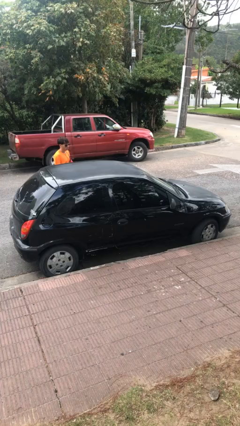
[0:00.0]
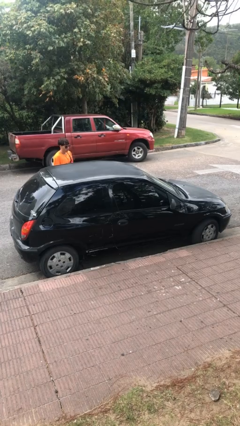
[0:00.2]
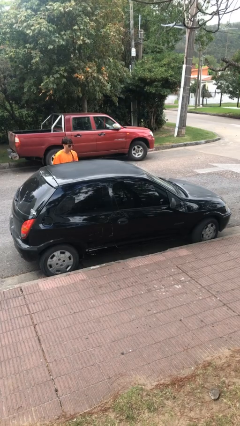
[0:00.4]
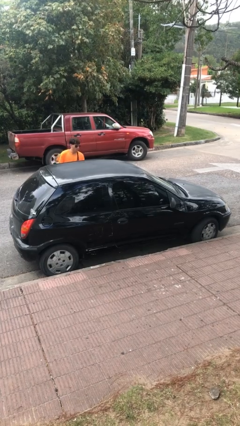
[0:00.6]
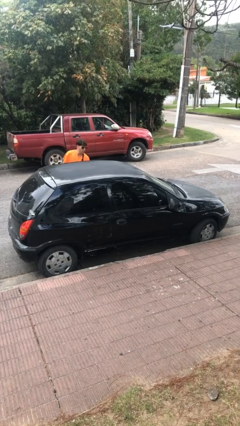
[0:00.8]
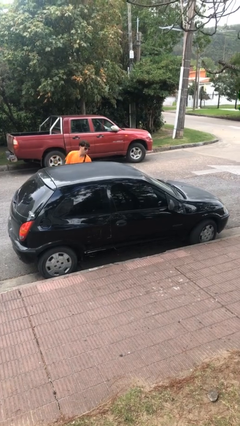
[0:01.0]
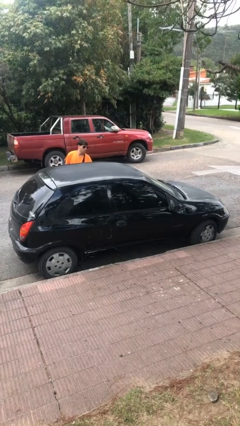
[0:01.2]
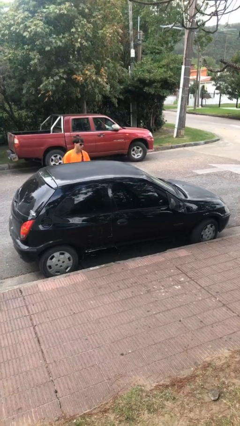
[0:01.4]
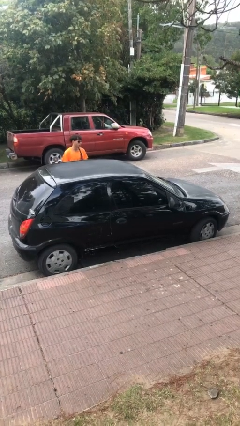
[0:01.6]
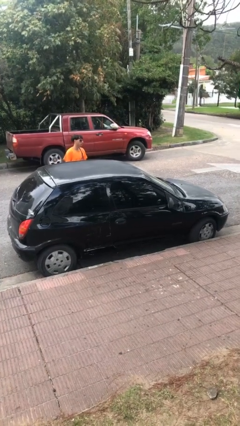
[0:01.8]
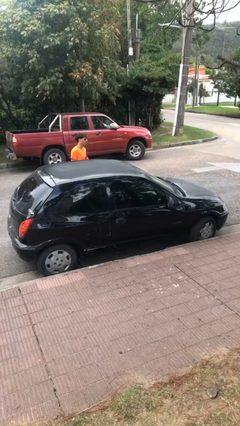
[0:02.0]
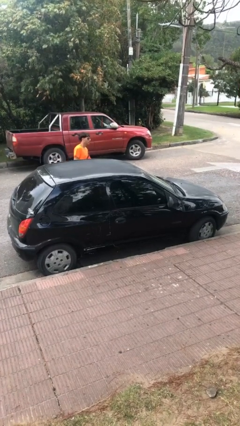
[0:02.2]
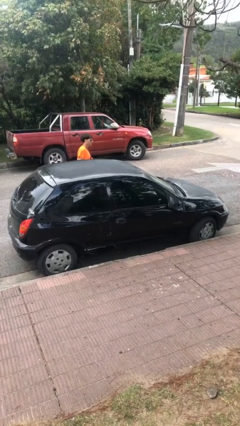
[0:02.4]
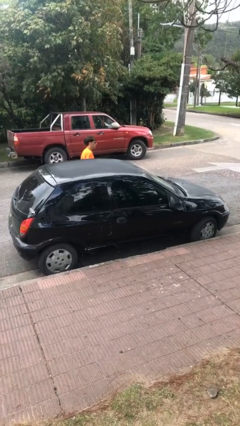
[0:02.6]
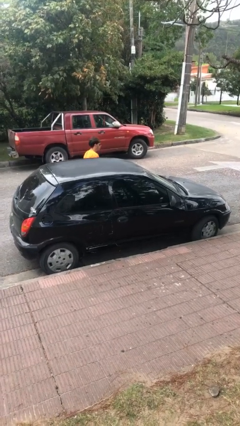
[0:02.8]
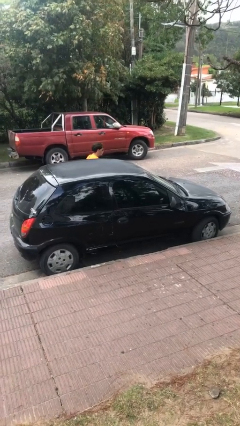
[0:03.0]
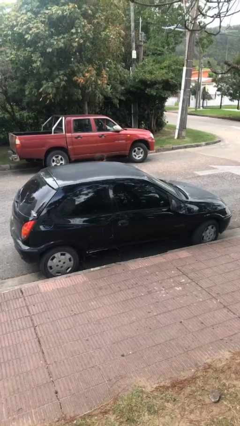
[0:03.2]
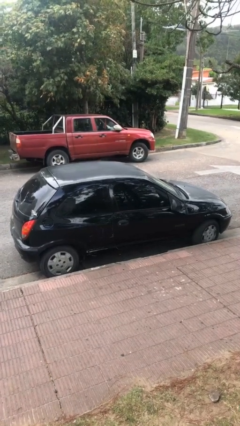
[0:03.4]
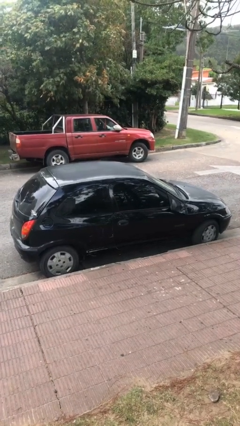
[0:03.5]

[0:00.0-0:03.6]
car picks up person

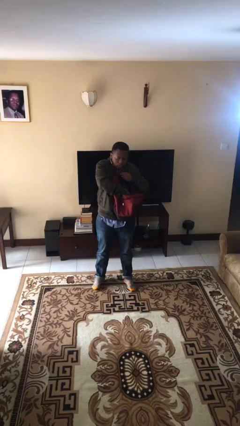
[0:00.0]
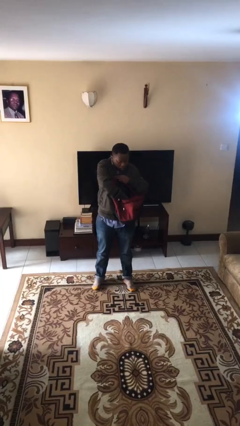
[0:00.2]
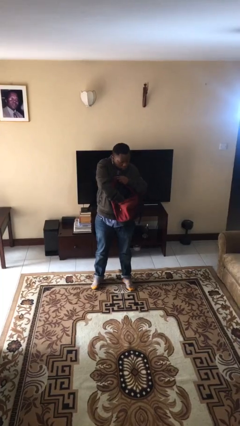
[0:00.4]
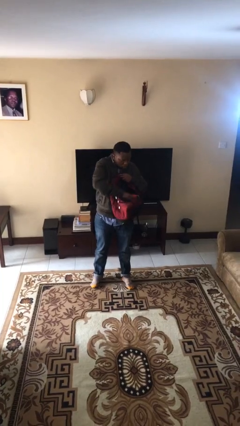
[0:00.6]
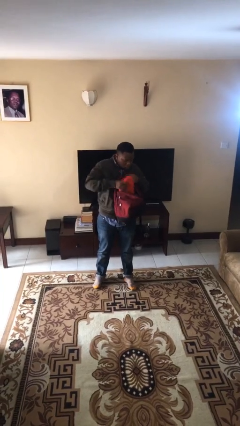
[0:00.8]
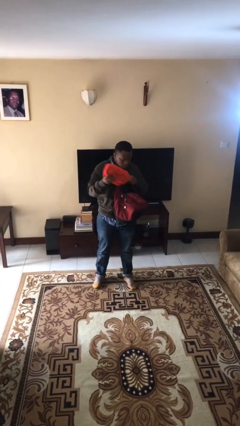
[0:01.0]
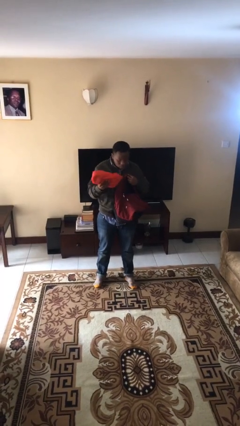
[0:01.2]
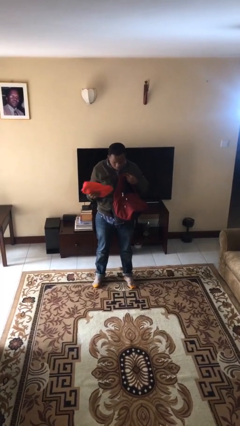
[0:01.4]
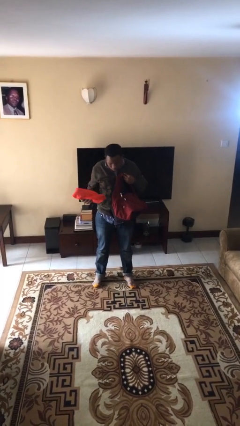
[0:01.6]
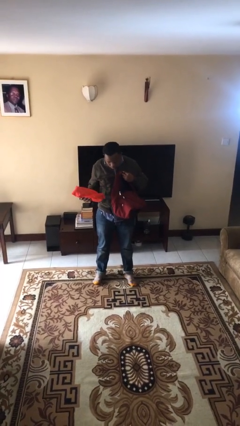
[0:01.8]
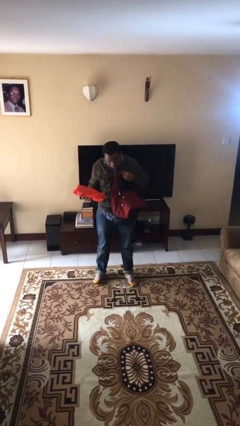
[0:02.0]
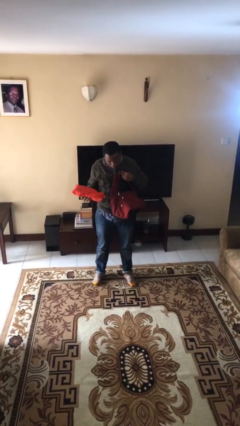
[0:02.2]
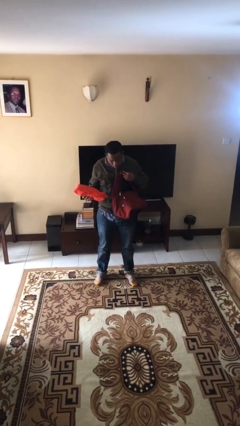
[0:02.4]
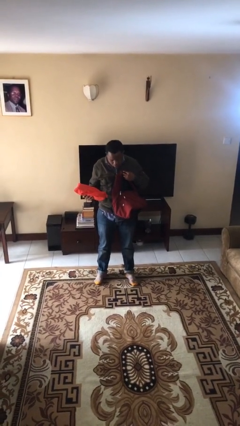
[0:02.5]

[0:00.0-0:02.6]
person takes object from backpack

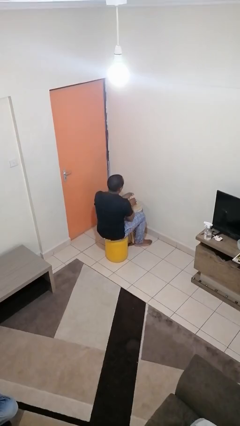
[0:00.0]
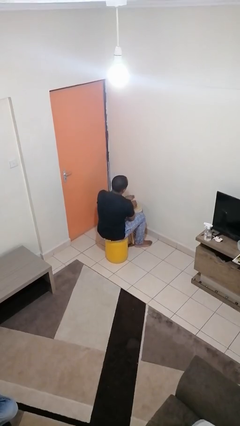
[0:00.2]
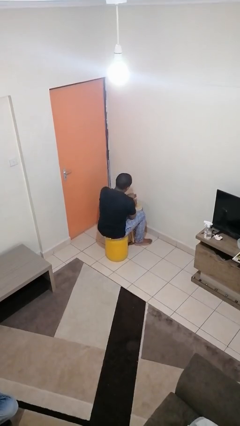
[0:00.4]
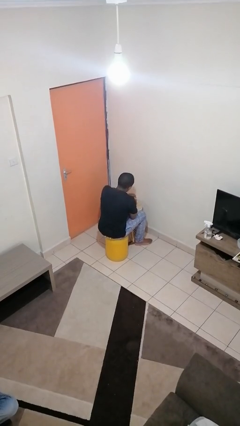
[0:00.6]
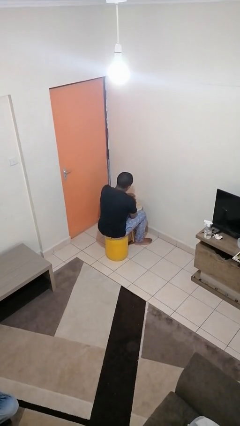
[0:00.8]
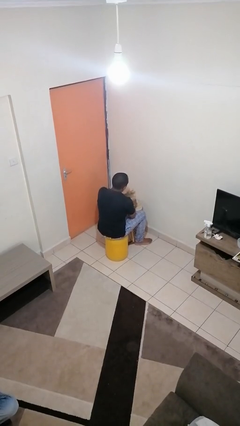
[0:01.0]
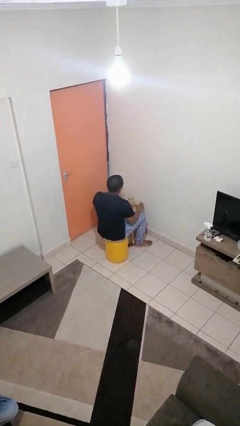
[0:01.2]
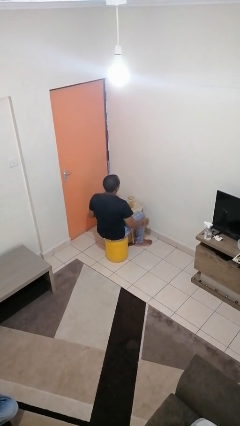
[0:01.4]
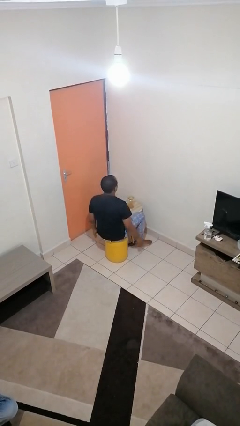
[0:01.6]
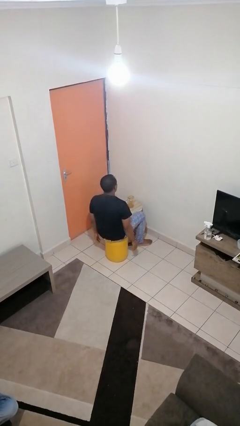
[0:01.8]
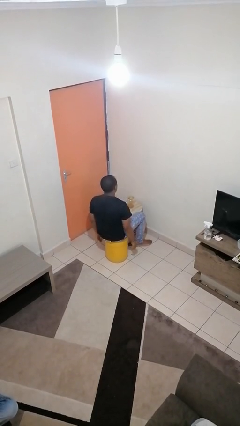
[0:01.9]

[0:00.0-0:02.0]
person closes jar

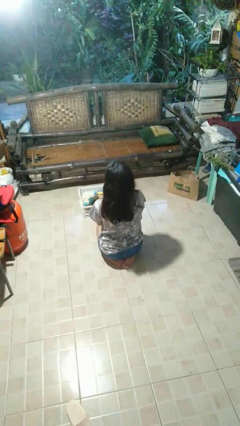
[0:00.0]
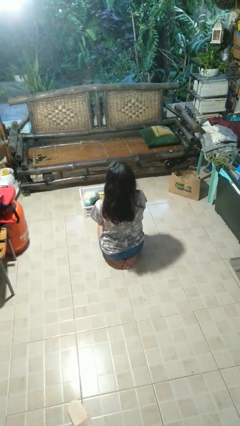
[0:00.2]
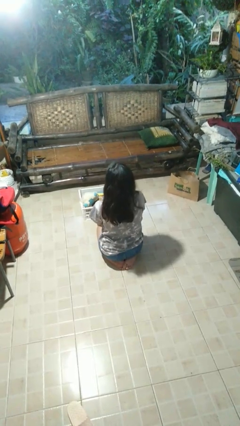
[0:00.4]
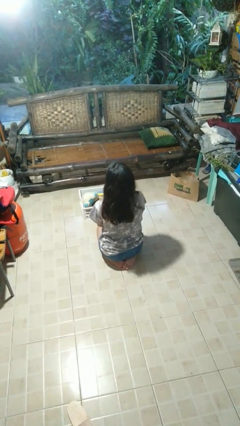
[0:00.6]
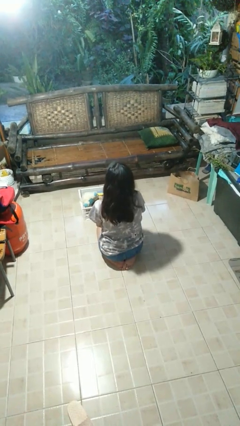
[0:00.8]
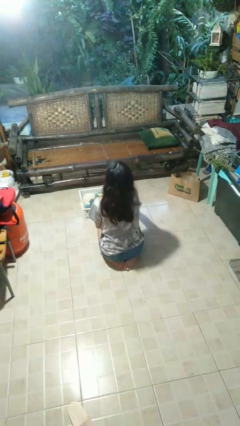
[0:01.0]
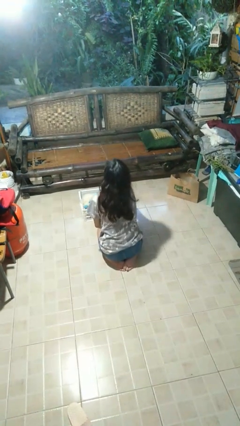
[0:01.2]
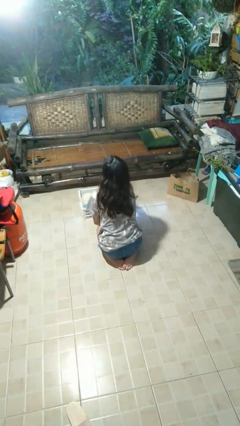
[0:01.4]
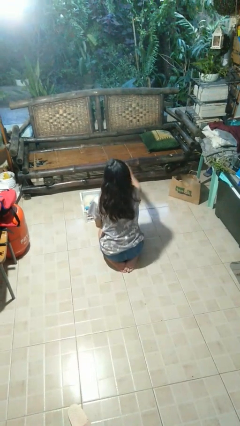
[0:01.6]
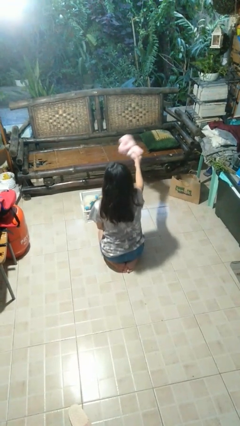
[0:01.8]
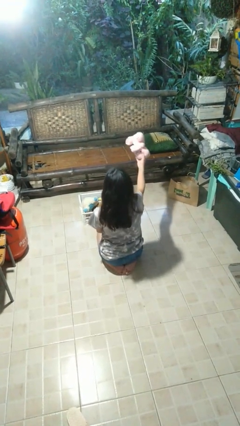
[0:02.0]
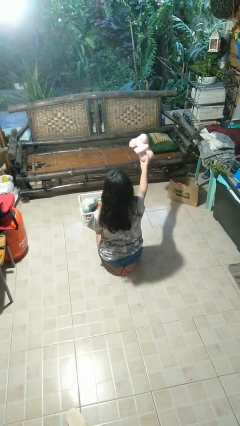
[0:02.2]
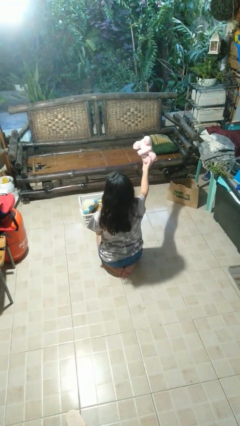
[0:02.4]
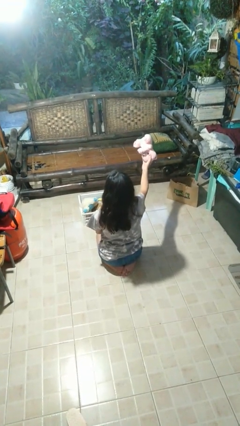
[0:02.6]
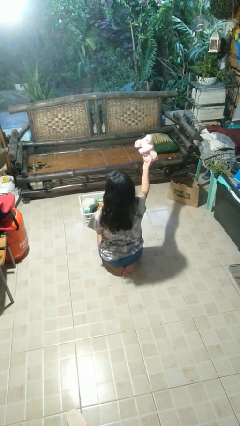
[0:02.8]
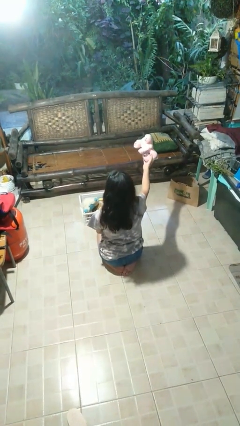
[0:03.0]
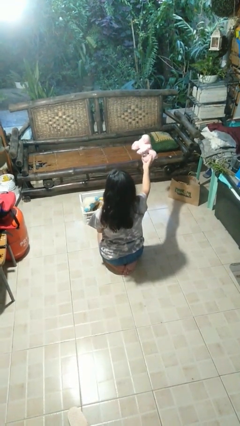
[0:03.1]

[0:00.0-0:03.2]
person takes object from basket

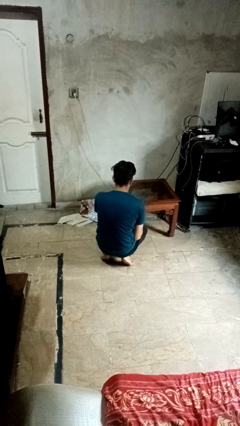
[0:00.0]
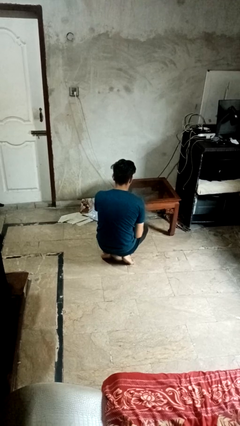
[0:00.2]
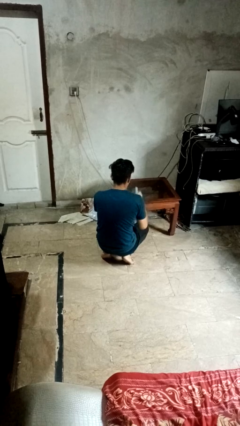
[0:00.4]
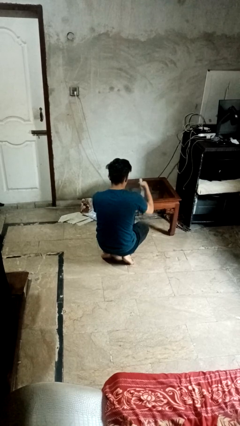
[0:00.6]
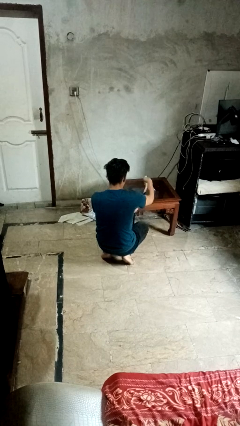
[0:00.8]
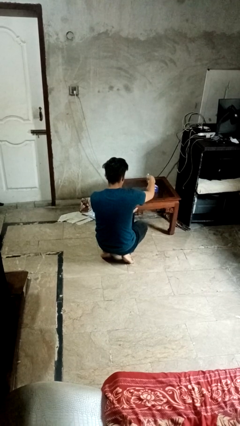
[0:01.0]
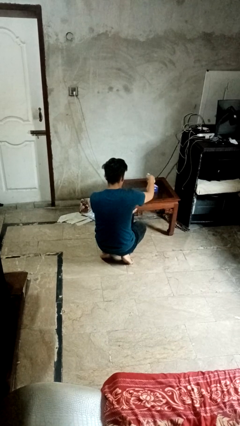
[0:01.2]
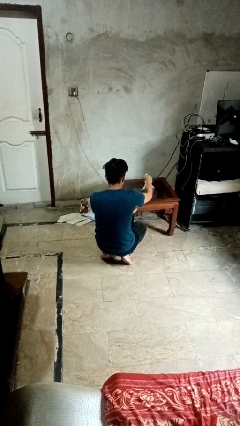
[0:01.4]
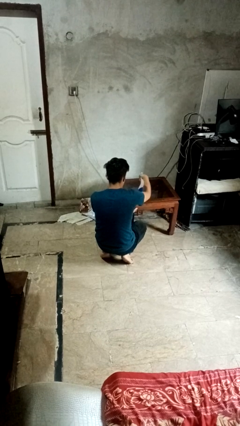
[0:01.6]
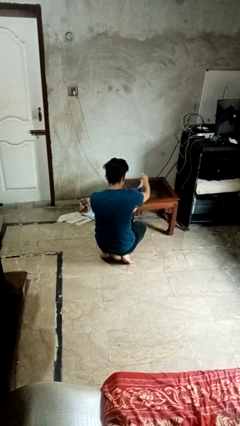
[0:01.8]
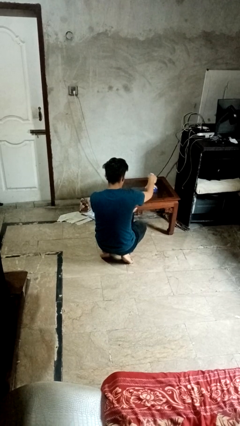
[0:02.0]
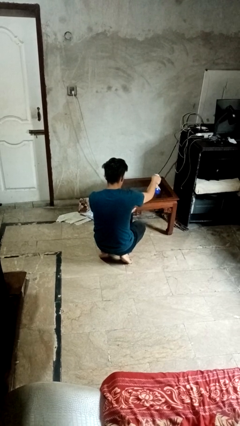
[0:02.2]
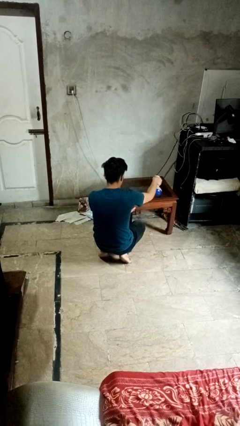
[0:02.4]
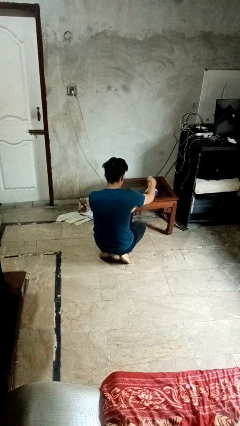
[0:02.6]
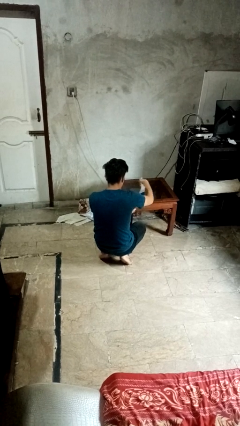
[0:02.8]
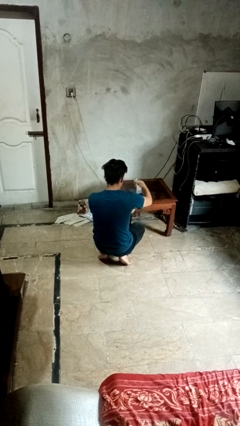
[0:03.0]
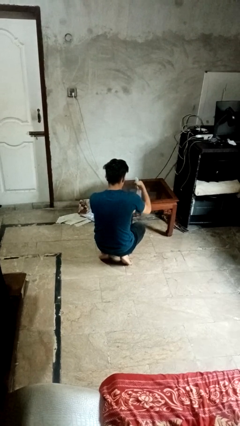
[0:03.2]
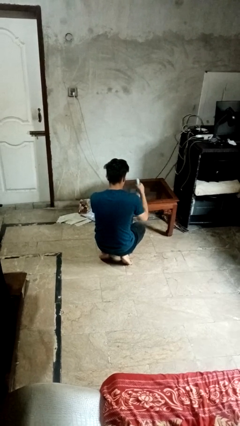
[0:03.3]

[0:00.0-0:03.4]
person sprays from bottle

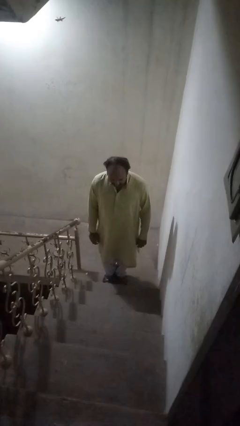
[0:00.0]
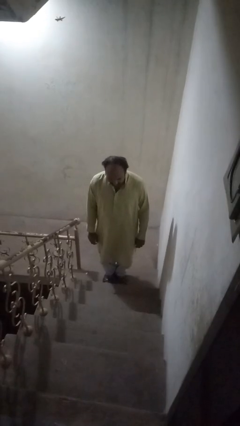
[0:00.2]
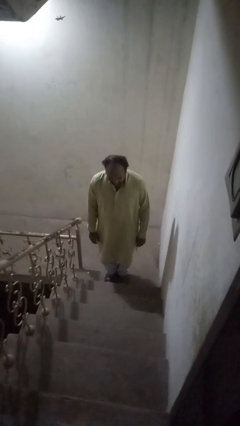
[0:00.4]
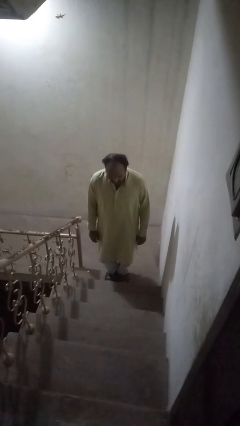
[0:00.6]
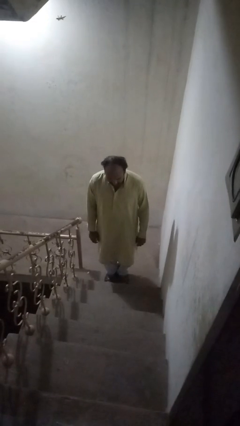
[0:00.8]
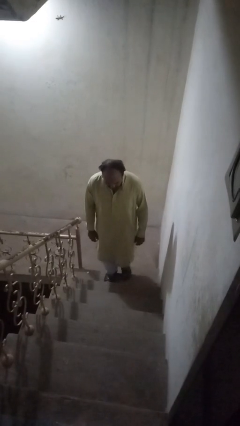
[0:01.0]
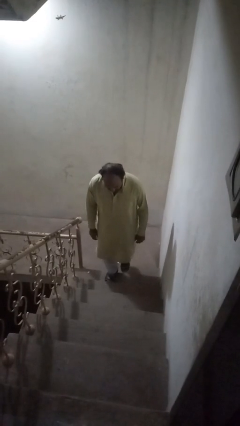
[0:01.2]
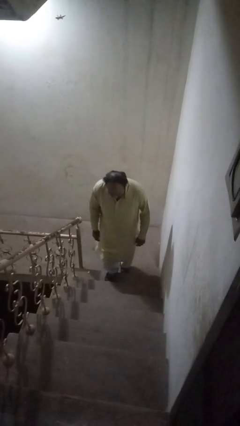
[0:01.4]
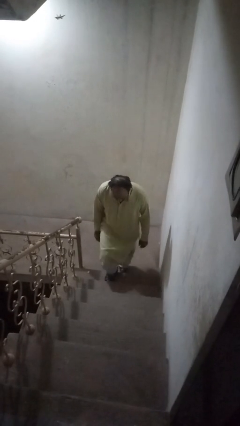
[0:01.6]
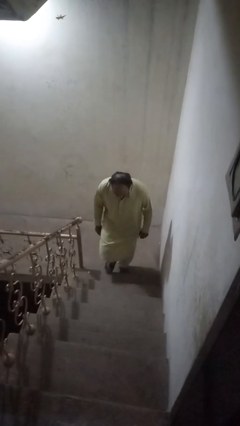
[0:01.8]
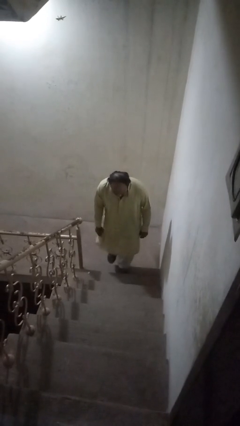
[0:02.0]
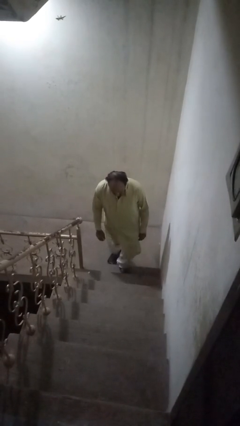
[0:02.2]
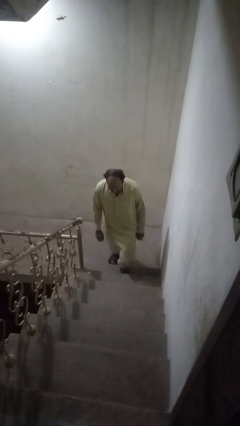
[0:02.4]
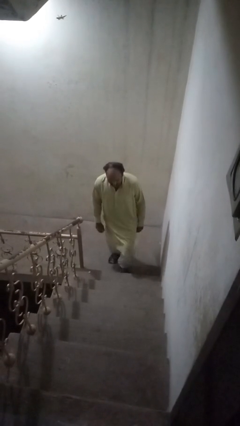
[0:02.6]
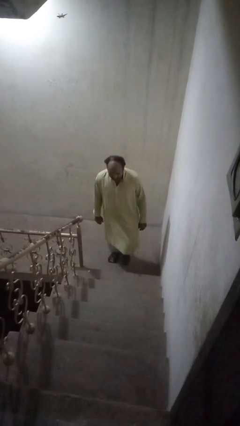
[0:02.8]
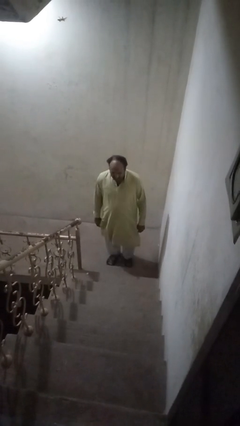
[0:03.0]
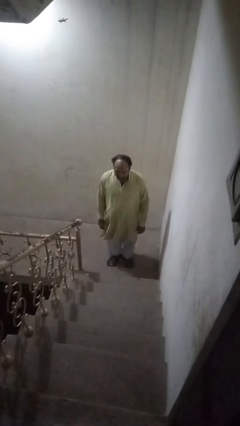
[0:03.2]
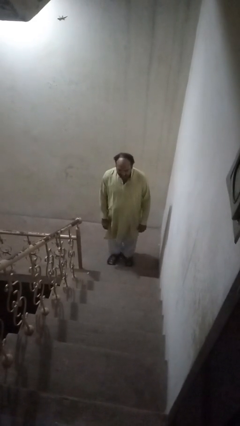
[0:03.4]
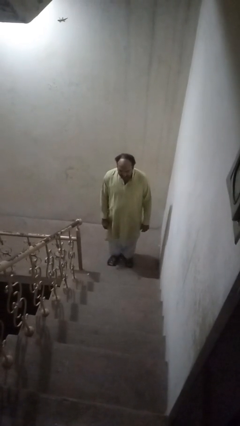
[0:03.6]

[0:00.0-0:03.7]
person climbs down ladder
